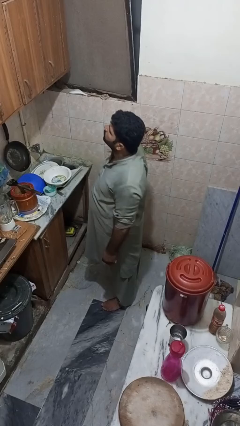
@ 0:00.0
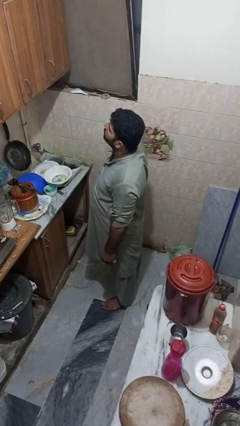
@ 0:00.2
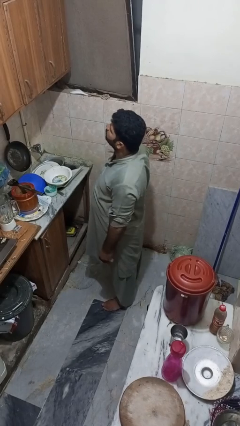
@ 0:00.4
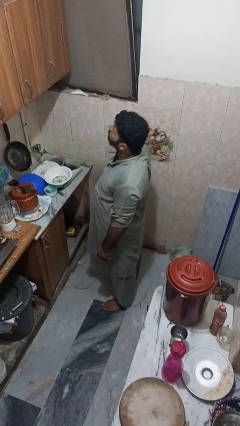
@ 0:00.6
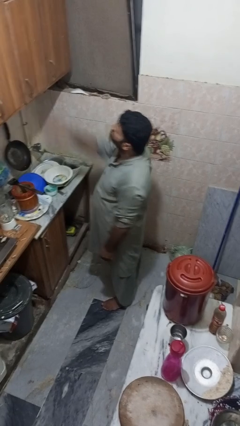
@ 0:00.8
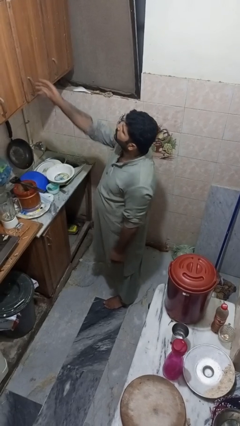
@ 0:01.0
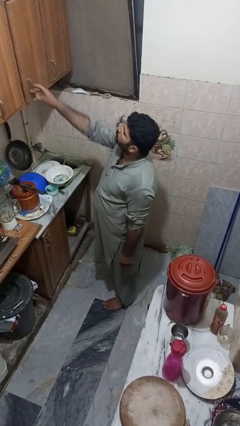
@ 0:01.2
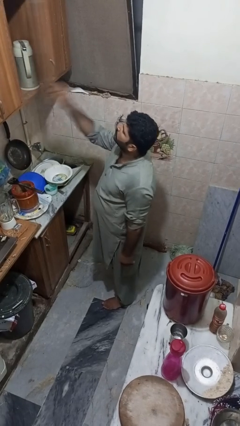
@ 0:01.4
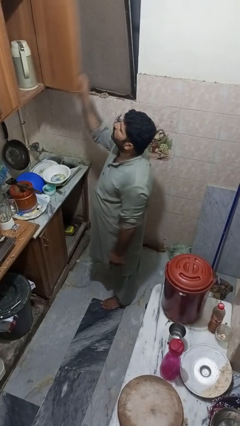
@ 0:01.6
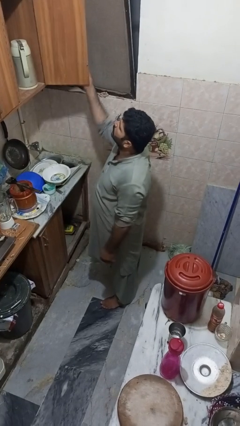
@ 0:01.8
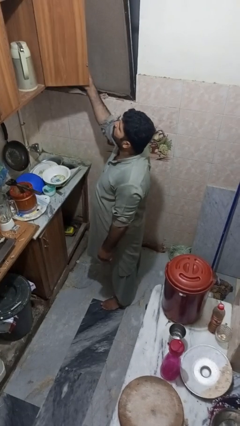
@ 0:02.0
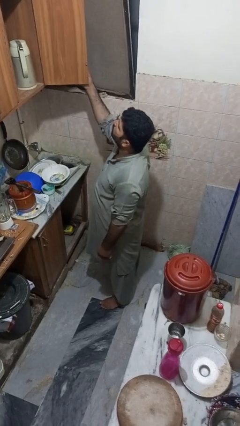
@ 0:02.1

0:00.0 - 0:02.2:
person opens cabinet

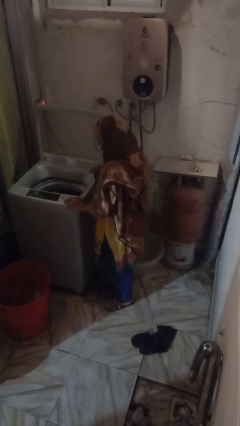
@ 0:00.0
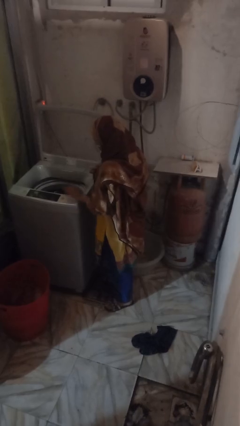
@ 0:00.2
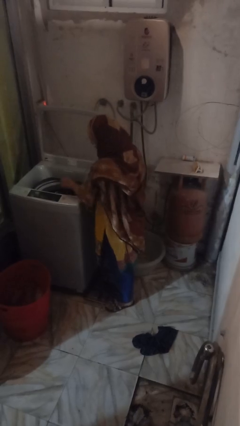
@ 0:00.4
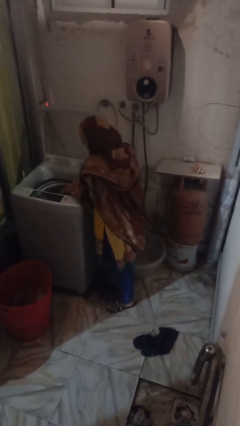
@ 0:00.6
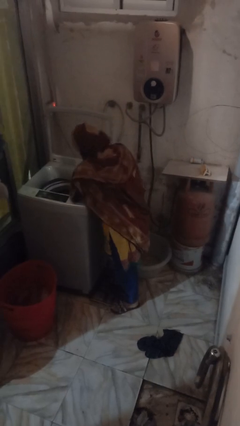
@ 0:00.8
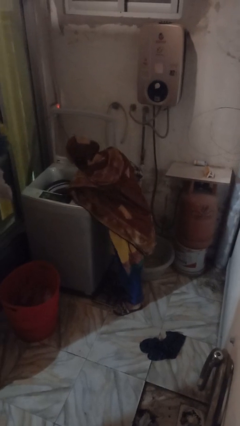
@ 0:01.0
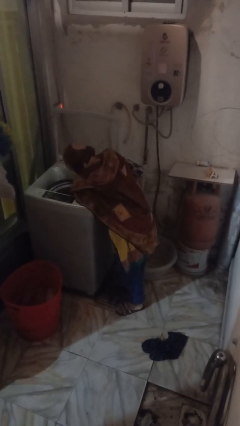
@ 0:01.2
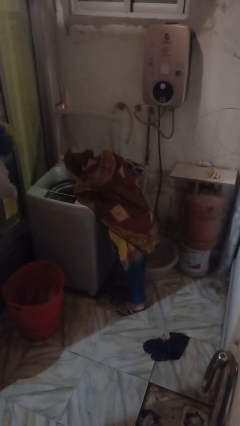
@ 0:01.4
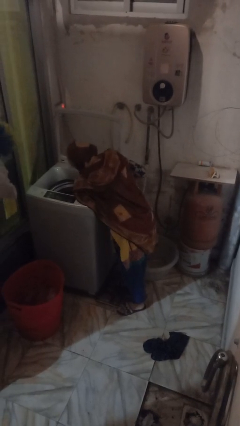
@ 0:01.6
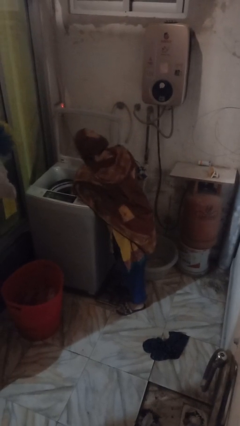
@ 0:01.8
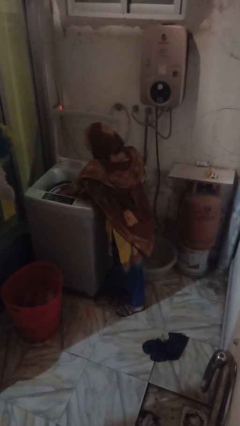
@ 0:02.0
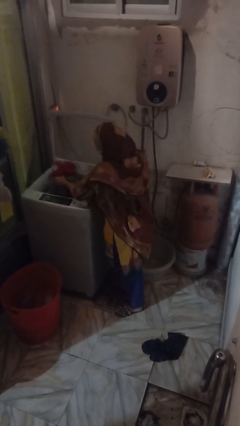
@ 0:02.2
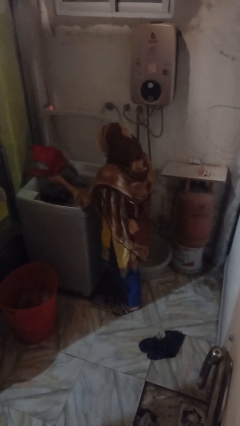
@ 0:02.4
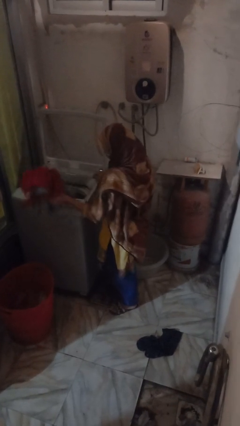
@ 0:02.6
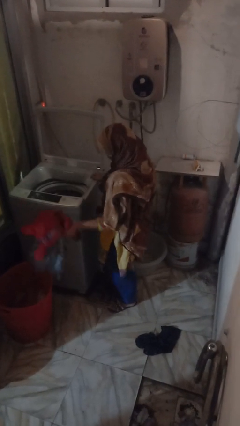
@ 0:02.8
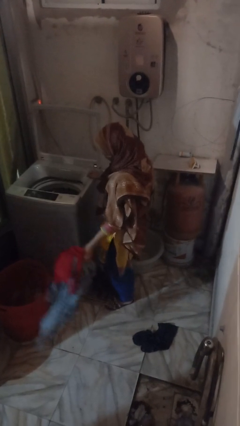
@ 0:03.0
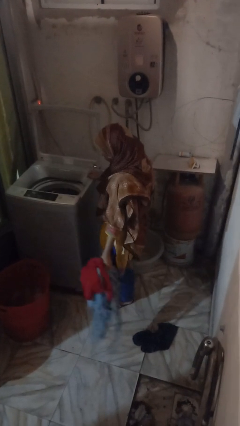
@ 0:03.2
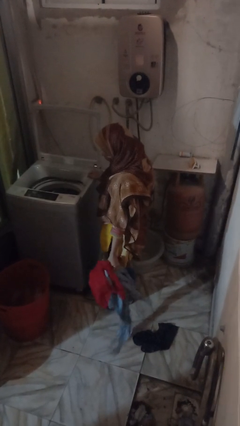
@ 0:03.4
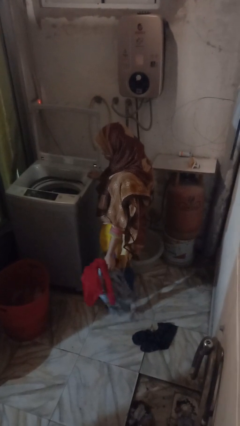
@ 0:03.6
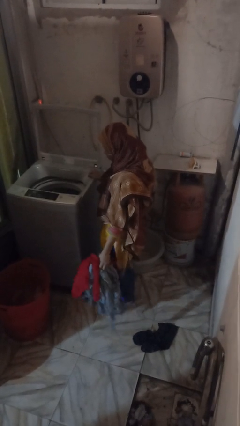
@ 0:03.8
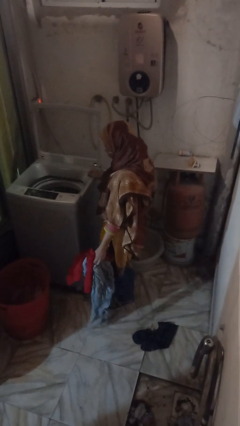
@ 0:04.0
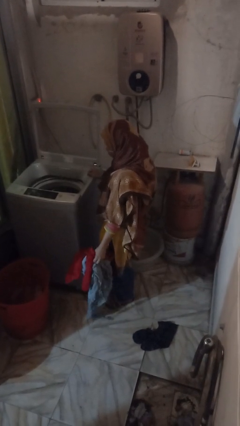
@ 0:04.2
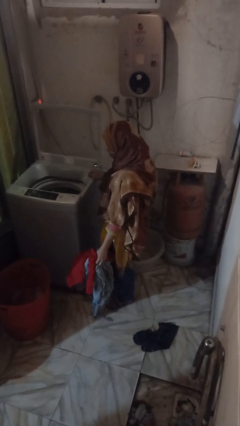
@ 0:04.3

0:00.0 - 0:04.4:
person unloads clotheswasher

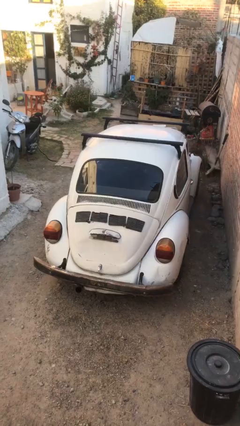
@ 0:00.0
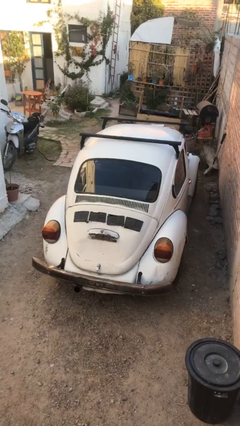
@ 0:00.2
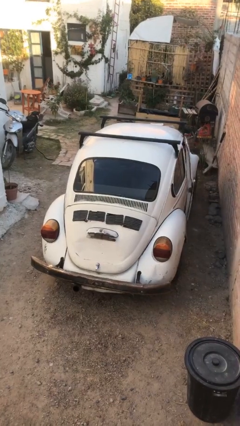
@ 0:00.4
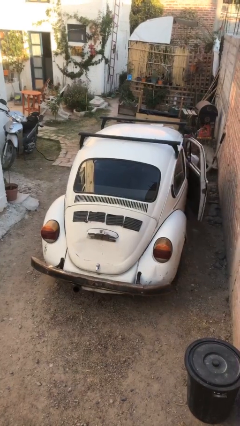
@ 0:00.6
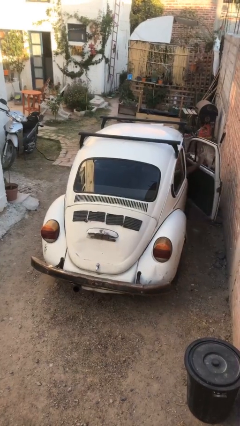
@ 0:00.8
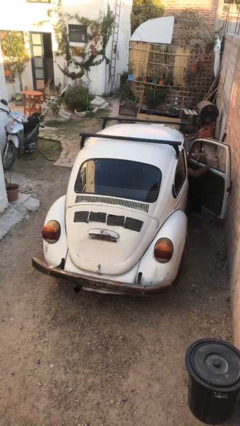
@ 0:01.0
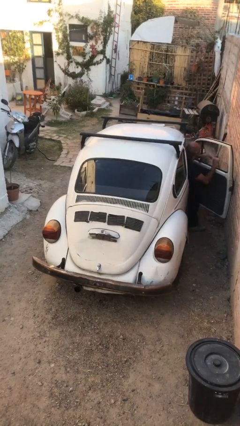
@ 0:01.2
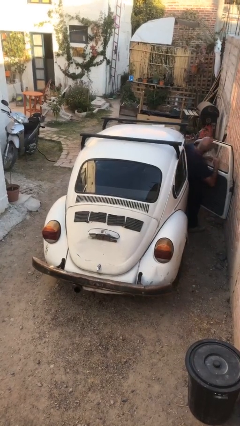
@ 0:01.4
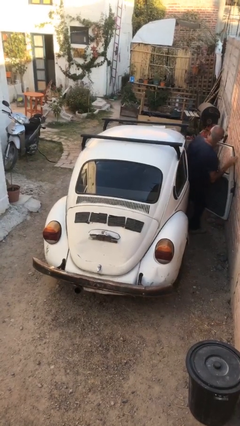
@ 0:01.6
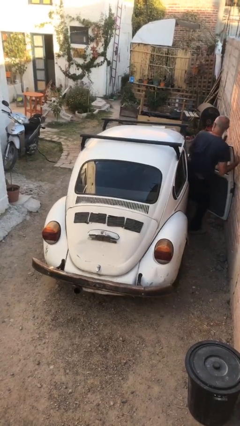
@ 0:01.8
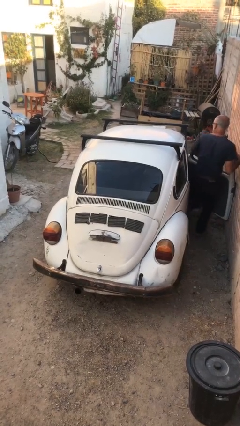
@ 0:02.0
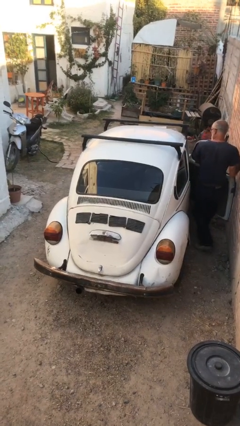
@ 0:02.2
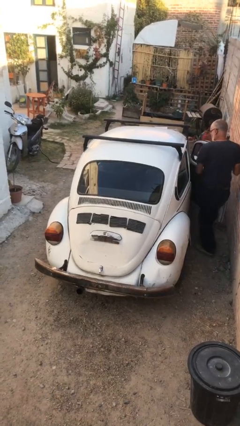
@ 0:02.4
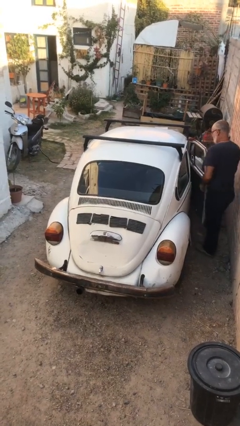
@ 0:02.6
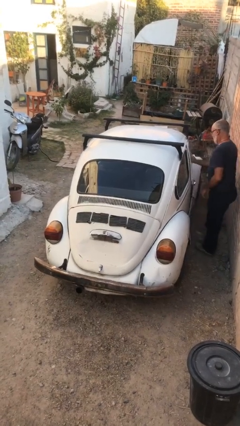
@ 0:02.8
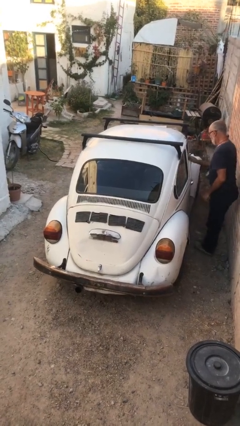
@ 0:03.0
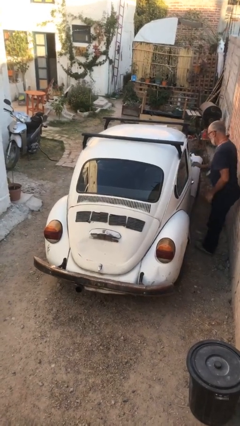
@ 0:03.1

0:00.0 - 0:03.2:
car drops off person

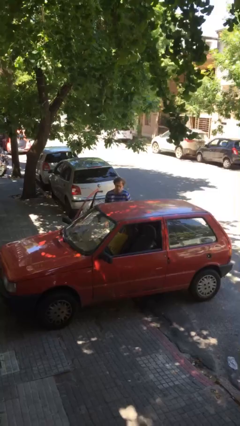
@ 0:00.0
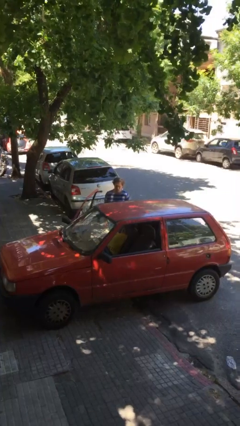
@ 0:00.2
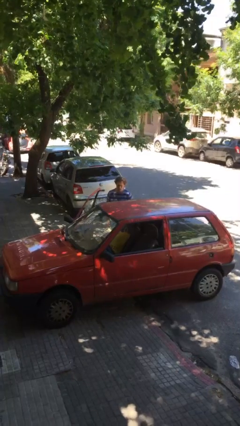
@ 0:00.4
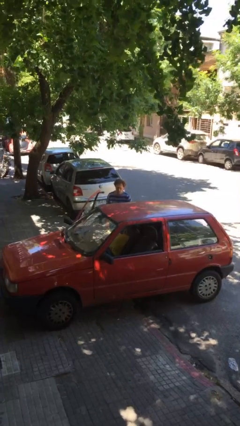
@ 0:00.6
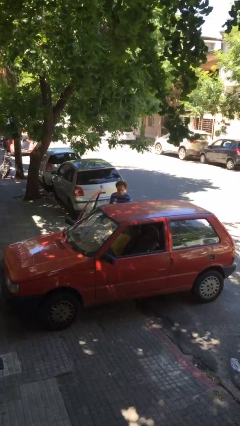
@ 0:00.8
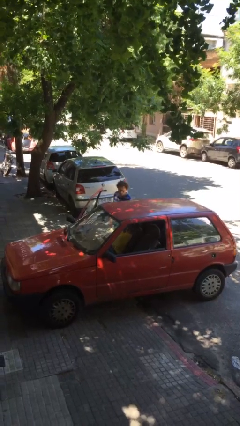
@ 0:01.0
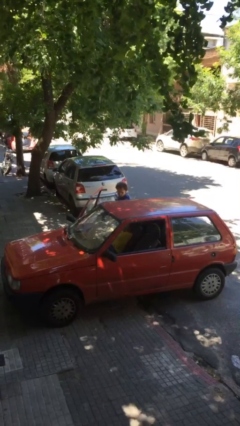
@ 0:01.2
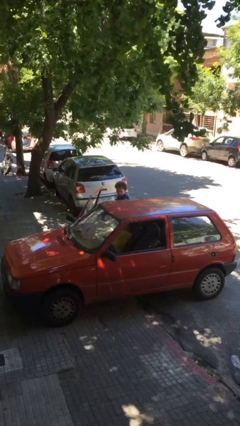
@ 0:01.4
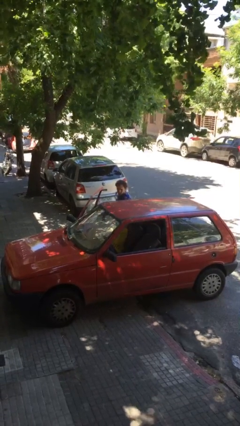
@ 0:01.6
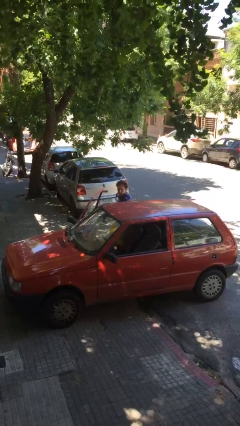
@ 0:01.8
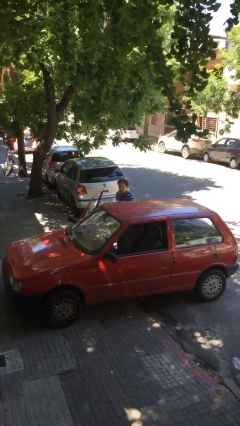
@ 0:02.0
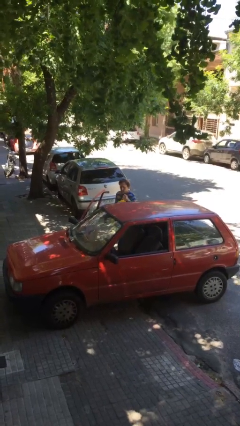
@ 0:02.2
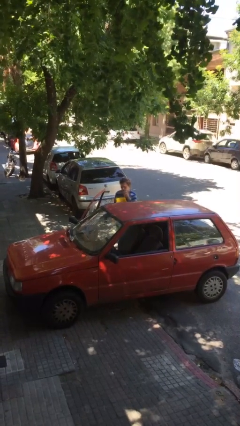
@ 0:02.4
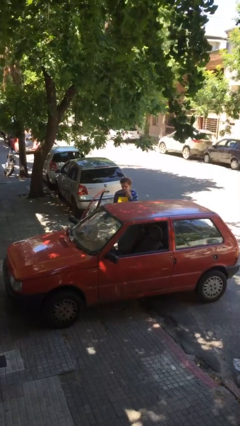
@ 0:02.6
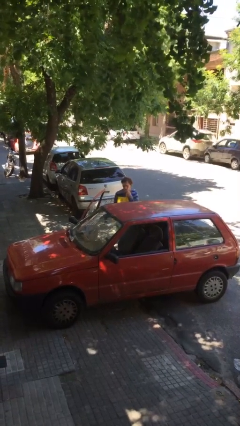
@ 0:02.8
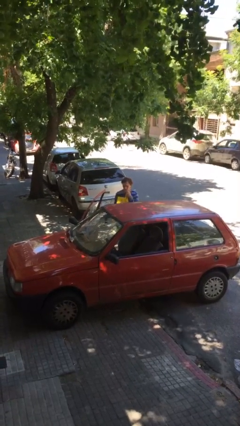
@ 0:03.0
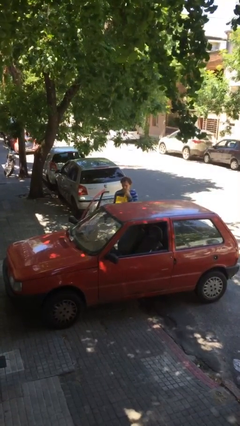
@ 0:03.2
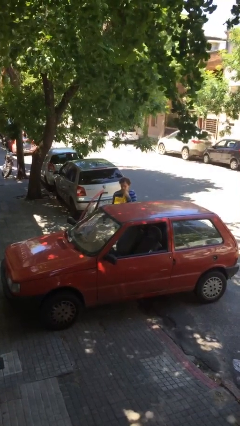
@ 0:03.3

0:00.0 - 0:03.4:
person unloads car

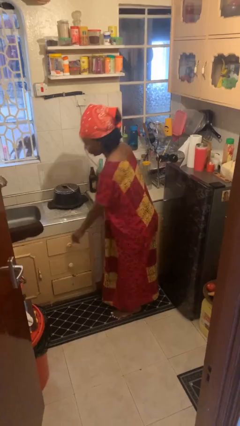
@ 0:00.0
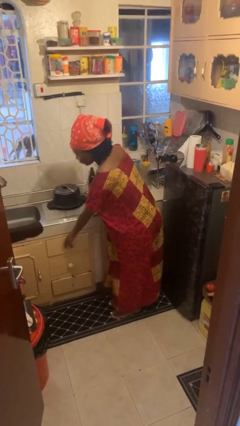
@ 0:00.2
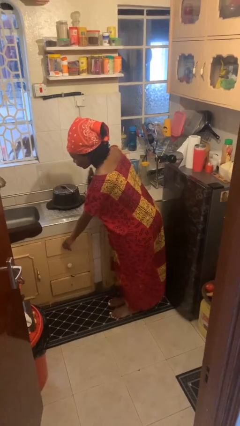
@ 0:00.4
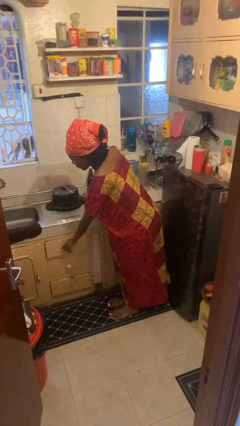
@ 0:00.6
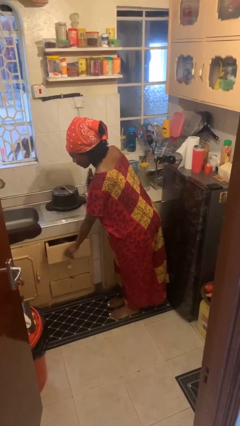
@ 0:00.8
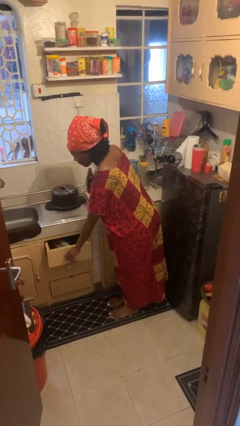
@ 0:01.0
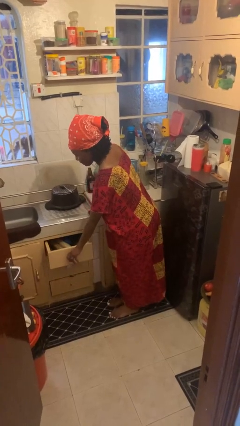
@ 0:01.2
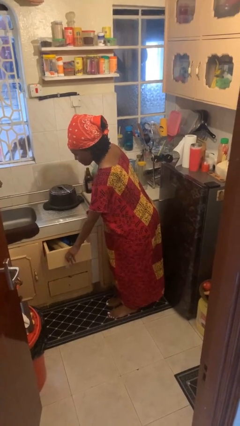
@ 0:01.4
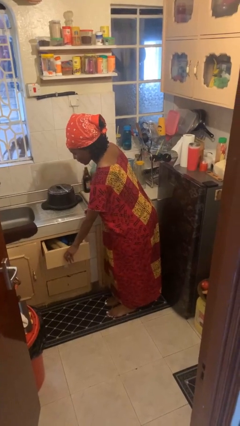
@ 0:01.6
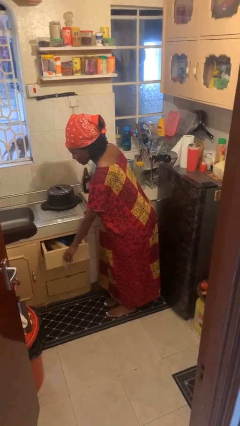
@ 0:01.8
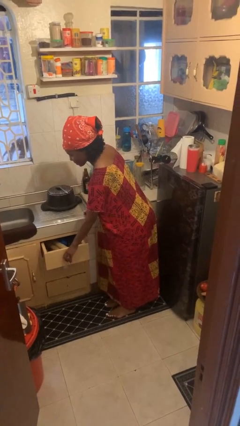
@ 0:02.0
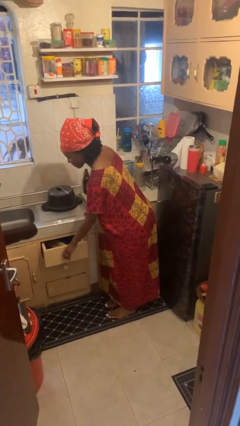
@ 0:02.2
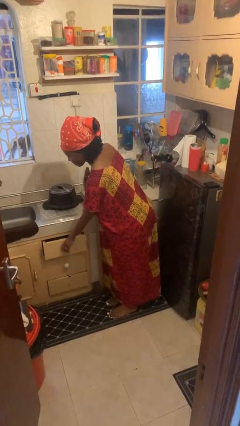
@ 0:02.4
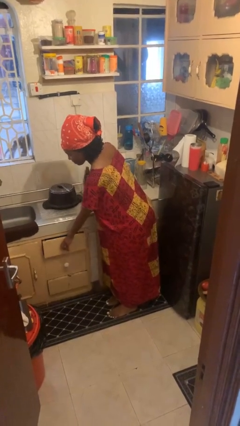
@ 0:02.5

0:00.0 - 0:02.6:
person opens kitchen drawer

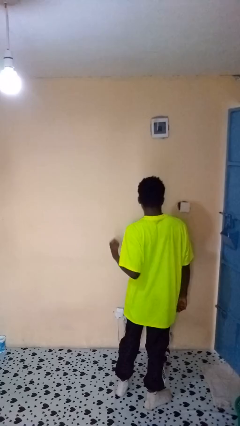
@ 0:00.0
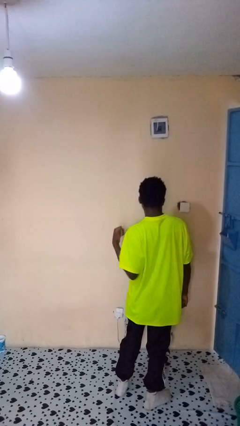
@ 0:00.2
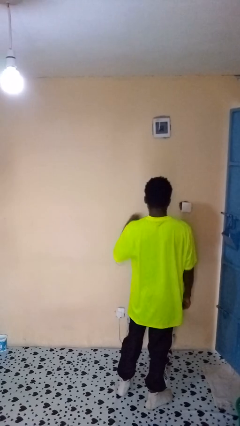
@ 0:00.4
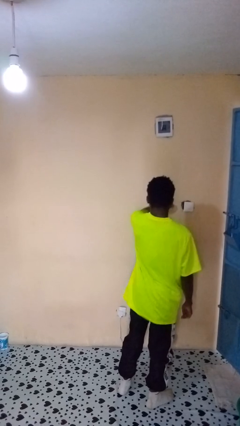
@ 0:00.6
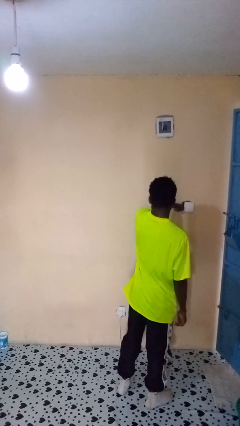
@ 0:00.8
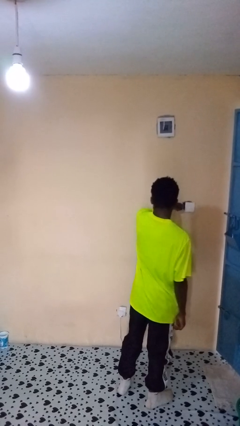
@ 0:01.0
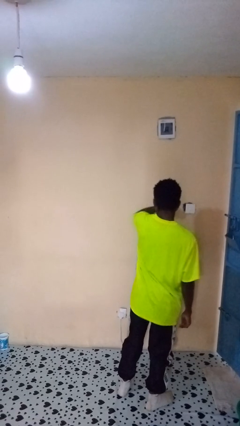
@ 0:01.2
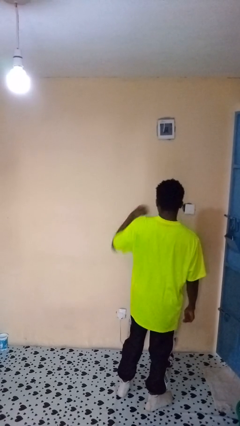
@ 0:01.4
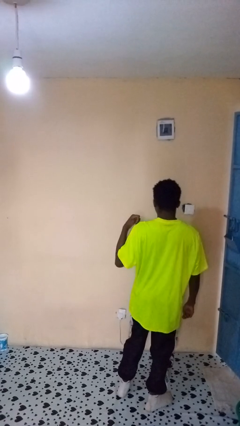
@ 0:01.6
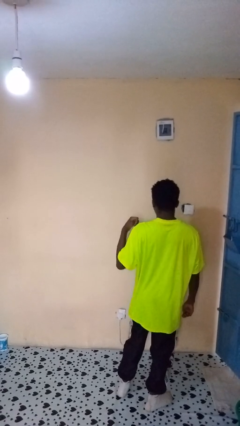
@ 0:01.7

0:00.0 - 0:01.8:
person punches
